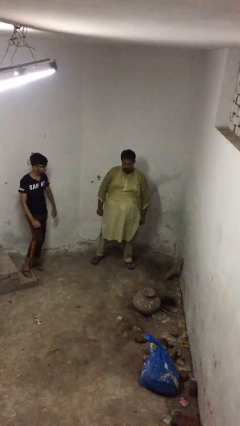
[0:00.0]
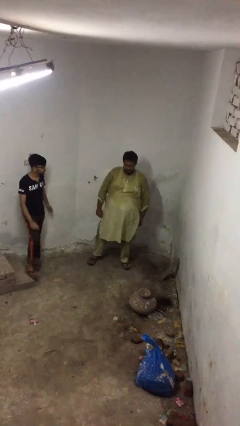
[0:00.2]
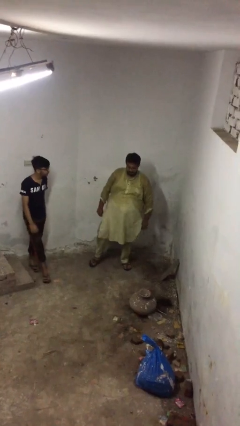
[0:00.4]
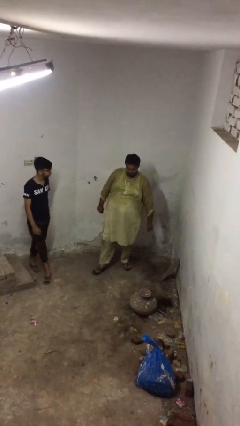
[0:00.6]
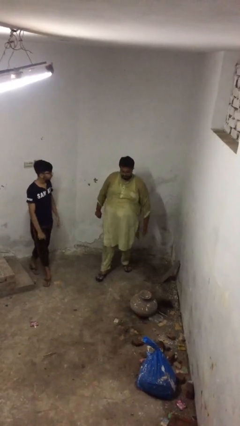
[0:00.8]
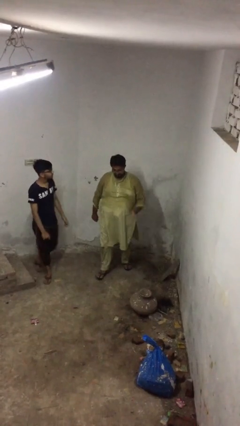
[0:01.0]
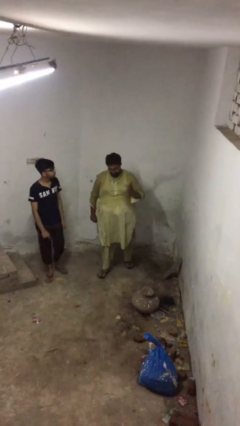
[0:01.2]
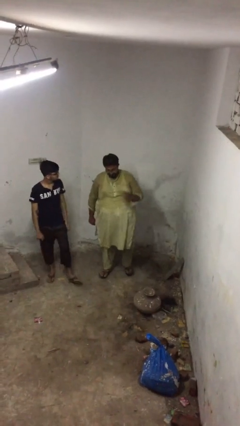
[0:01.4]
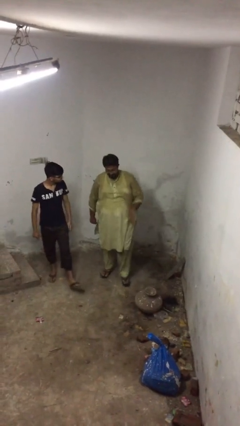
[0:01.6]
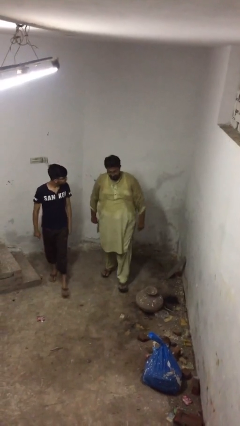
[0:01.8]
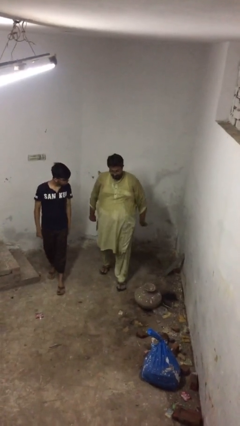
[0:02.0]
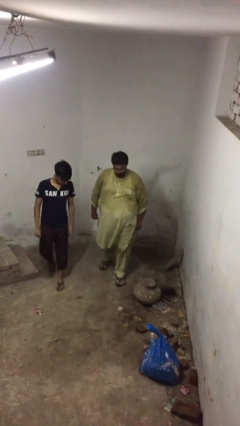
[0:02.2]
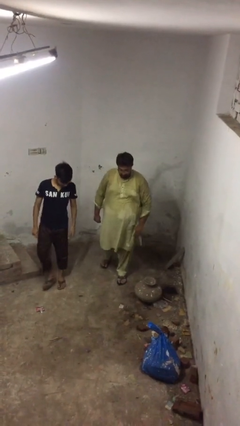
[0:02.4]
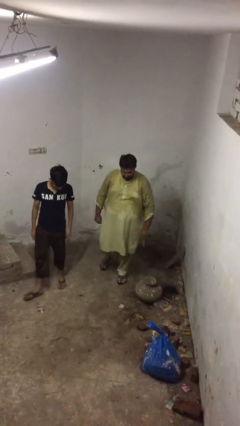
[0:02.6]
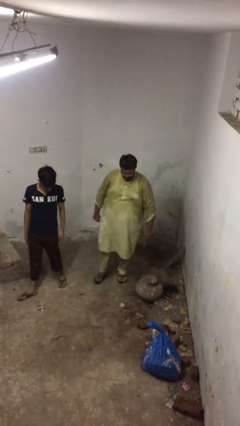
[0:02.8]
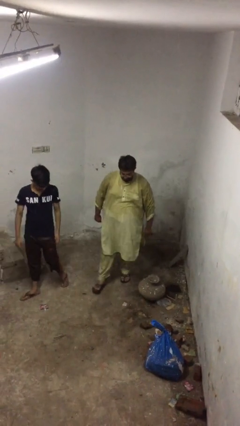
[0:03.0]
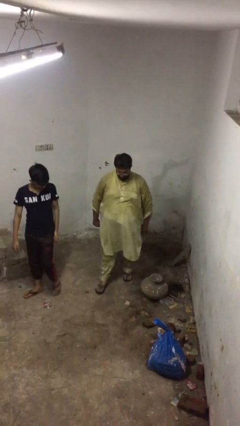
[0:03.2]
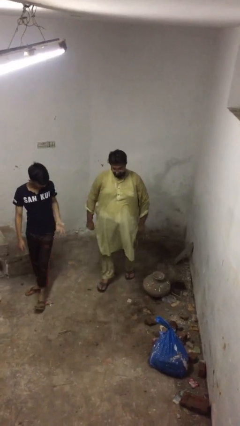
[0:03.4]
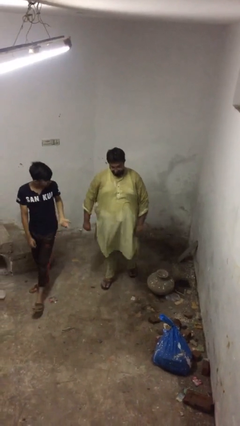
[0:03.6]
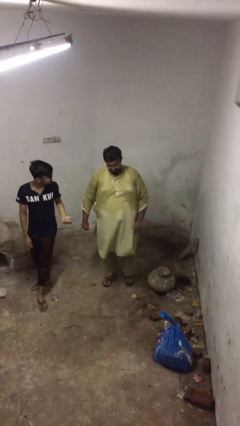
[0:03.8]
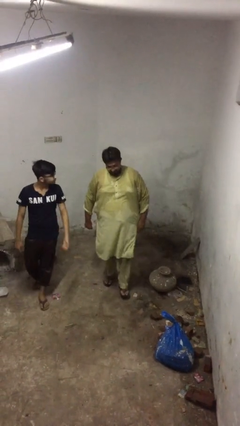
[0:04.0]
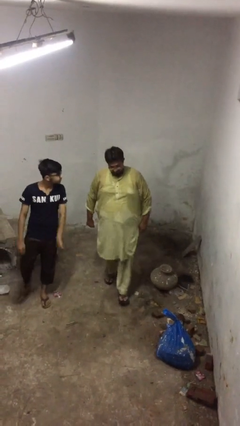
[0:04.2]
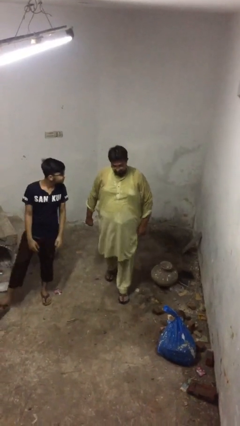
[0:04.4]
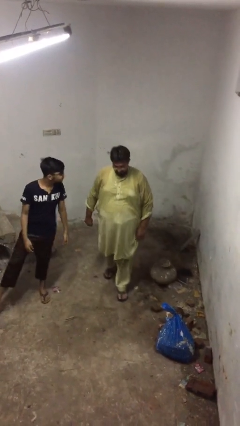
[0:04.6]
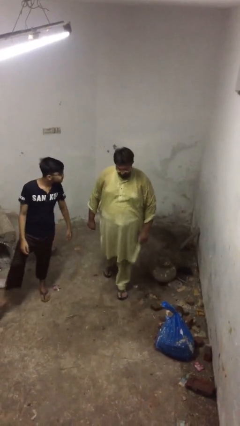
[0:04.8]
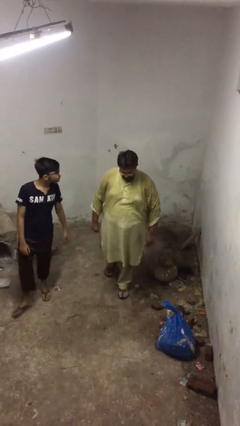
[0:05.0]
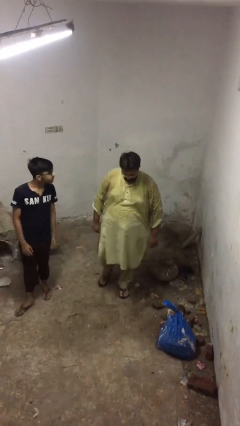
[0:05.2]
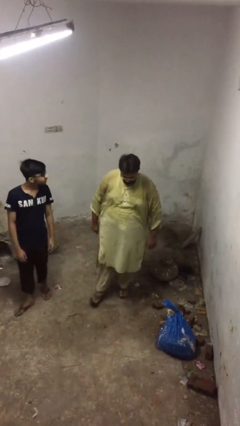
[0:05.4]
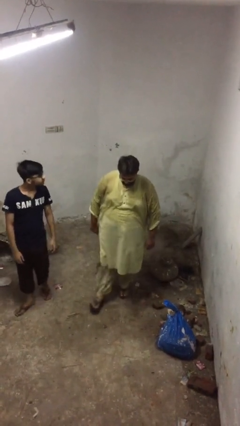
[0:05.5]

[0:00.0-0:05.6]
person talks to person

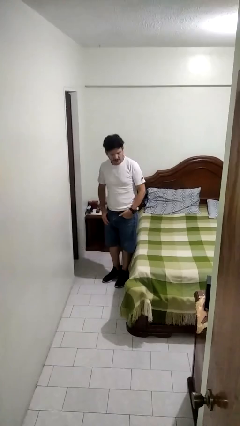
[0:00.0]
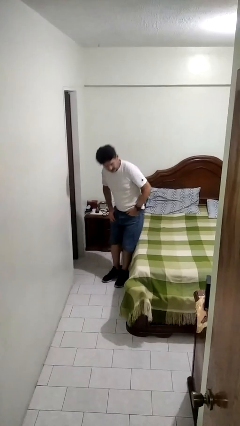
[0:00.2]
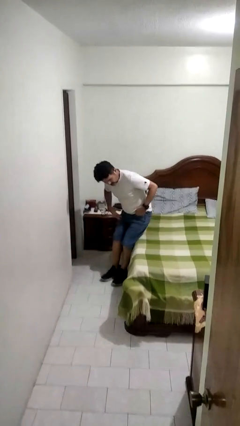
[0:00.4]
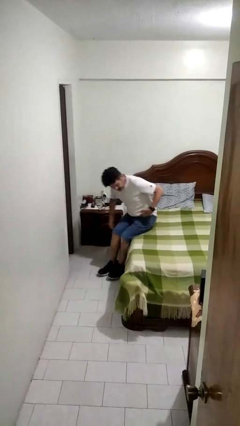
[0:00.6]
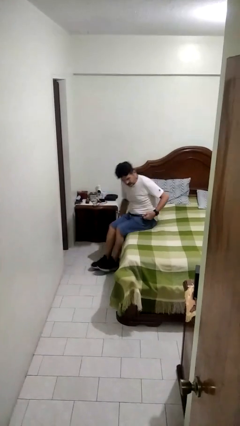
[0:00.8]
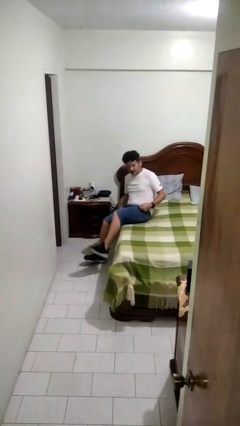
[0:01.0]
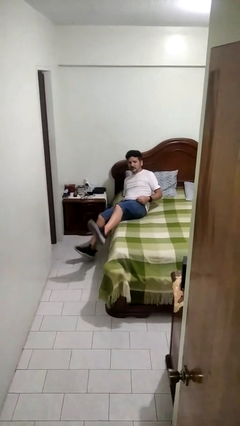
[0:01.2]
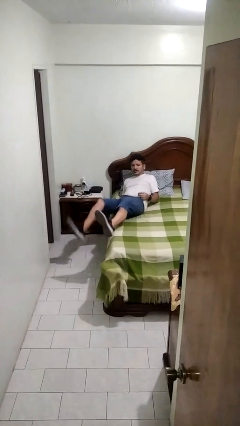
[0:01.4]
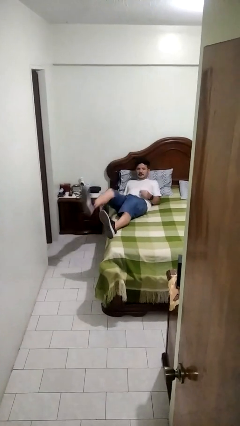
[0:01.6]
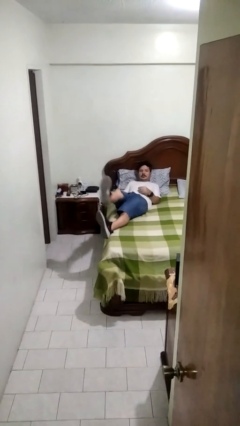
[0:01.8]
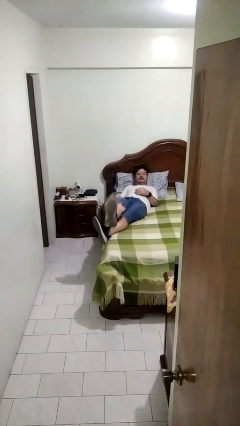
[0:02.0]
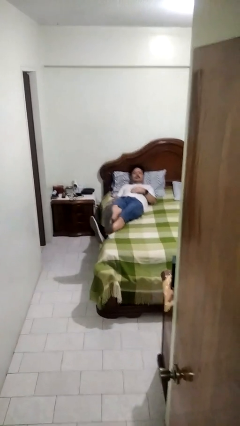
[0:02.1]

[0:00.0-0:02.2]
person lies down on bed

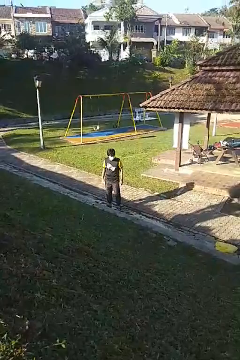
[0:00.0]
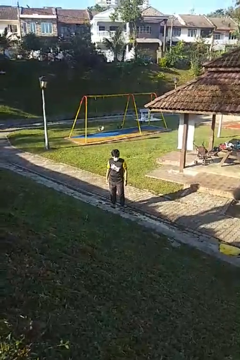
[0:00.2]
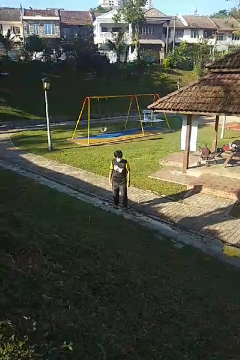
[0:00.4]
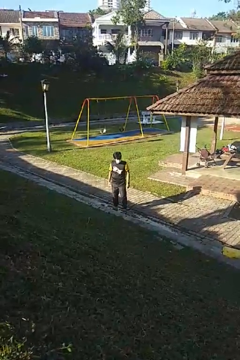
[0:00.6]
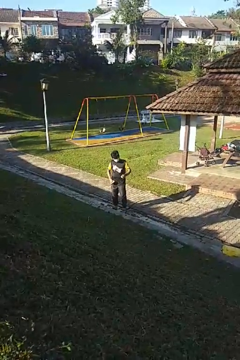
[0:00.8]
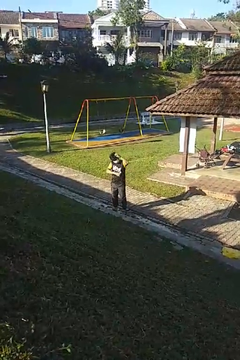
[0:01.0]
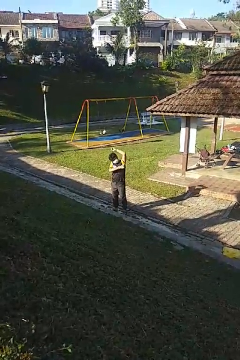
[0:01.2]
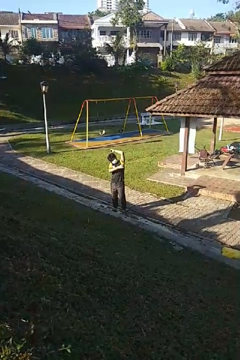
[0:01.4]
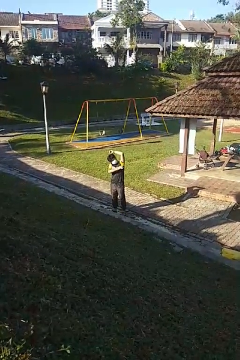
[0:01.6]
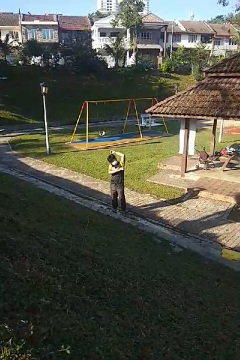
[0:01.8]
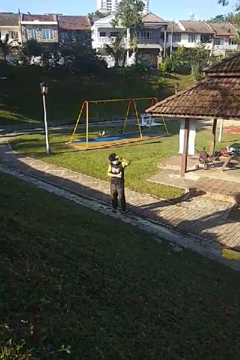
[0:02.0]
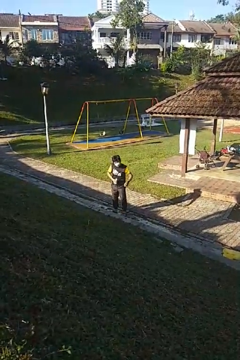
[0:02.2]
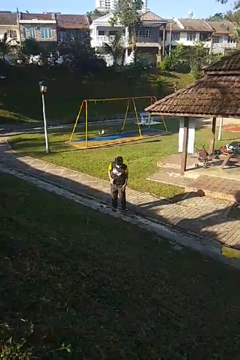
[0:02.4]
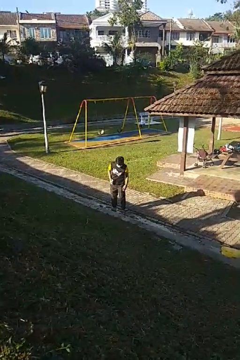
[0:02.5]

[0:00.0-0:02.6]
person applies deodorant

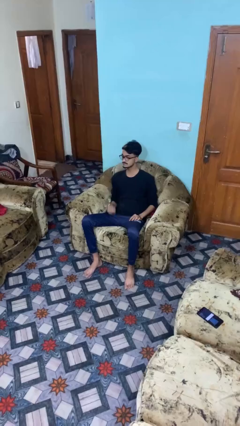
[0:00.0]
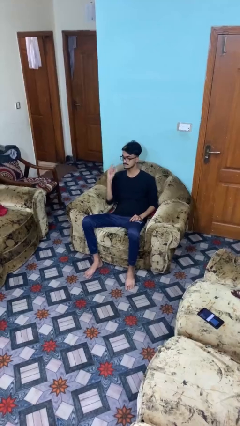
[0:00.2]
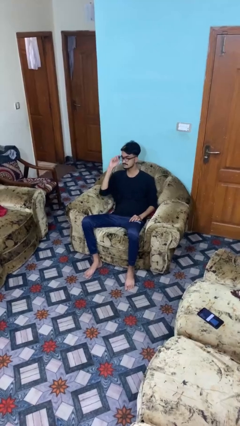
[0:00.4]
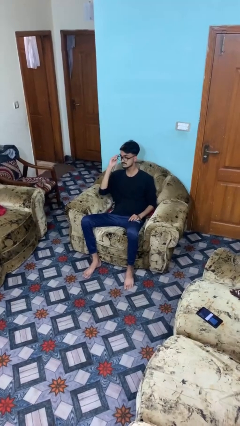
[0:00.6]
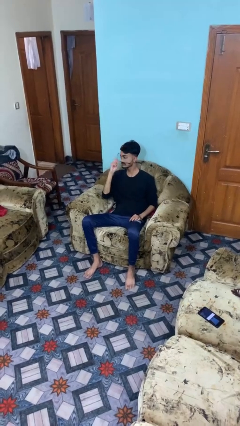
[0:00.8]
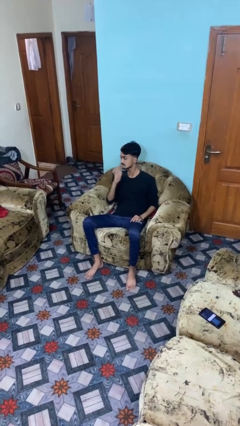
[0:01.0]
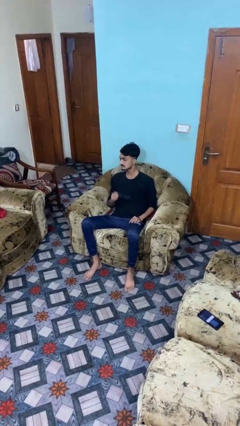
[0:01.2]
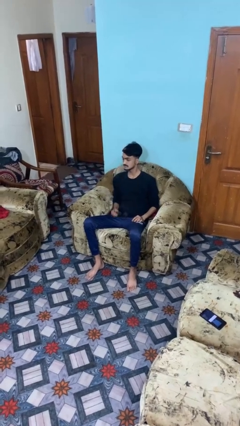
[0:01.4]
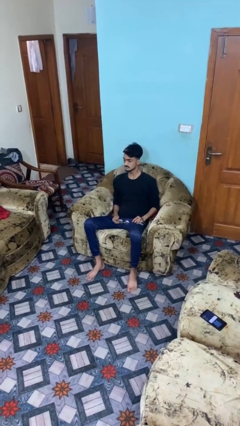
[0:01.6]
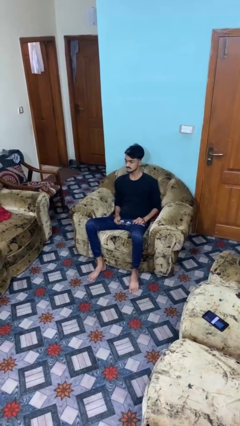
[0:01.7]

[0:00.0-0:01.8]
person takes off glasses

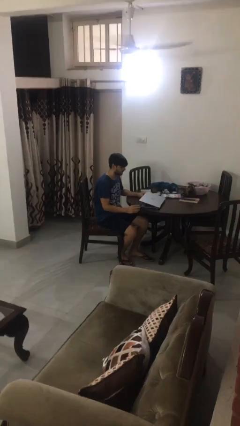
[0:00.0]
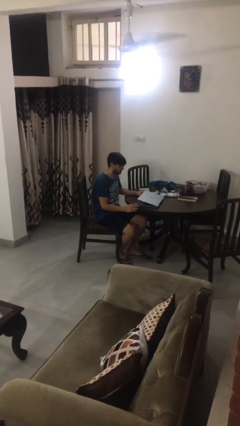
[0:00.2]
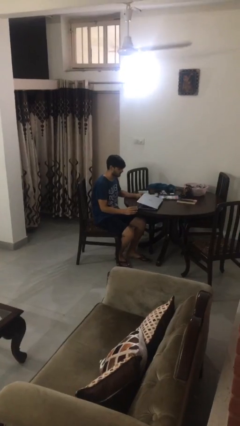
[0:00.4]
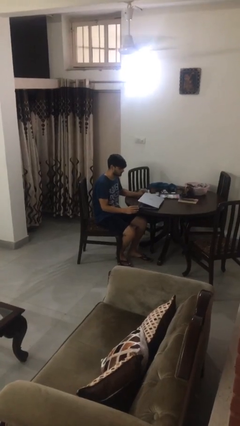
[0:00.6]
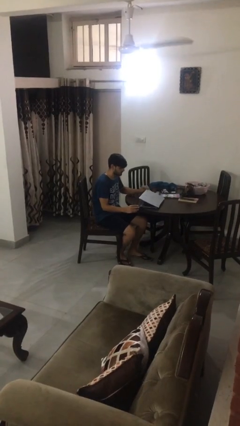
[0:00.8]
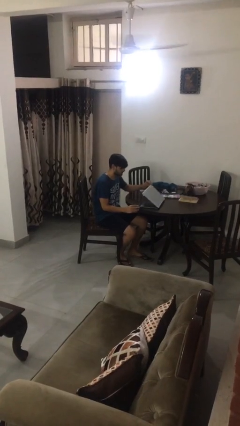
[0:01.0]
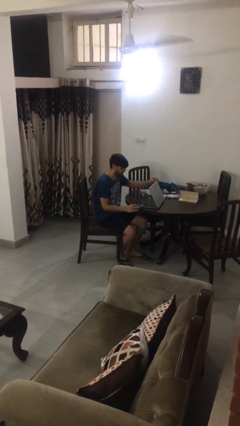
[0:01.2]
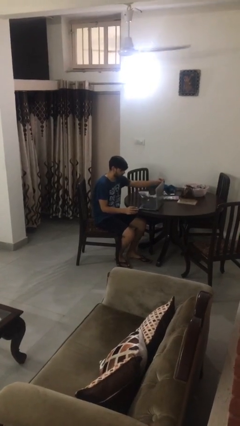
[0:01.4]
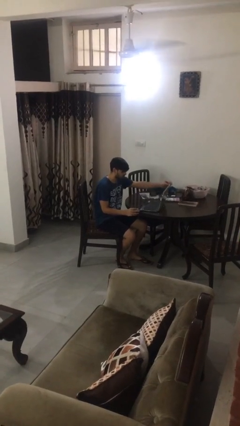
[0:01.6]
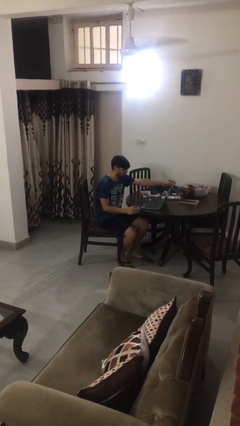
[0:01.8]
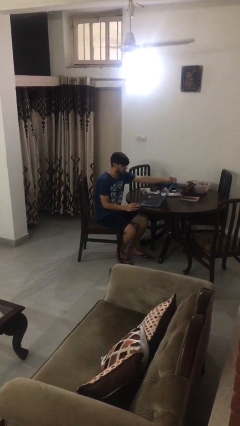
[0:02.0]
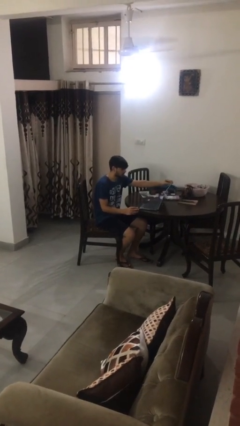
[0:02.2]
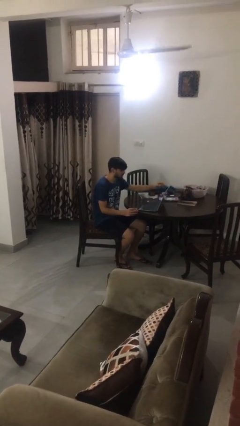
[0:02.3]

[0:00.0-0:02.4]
person opens laptop

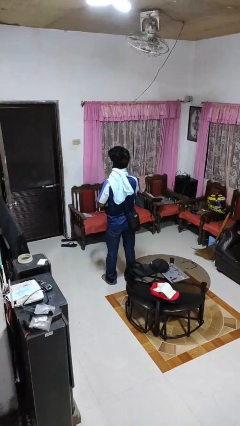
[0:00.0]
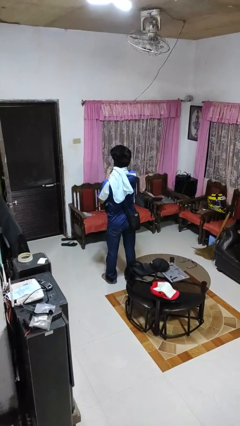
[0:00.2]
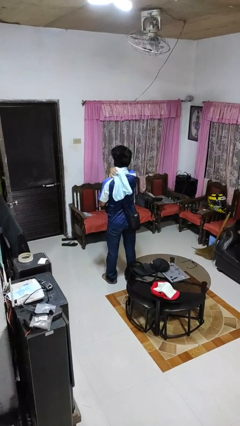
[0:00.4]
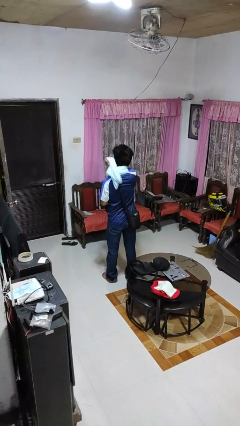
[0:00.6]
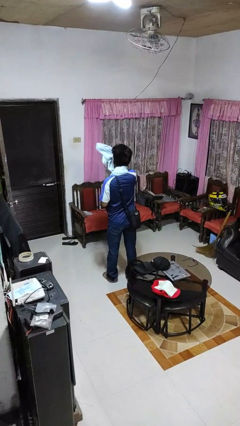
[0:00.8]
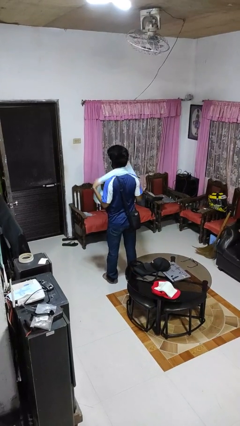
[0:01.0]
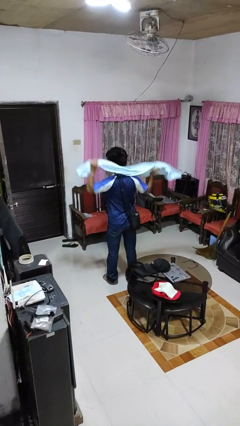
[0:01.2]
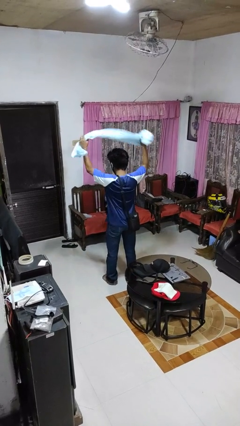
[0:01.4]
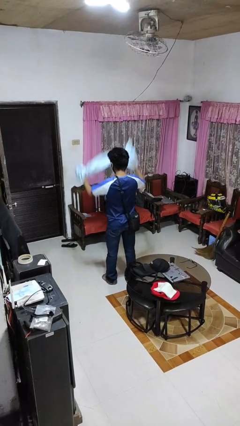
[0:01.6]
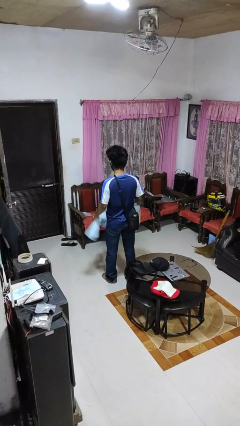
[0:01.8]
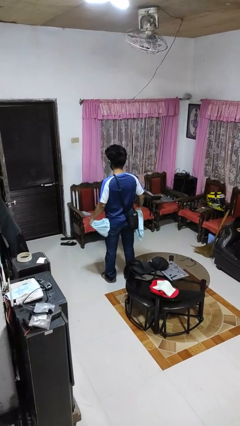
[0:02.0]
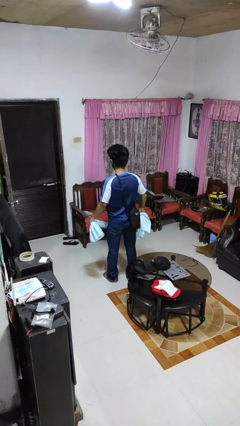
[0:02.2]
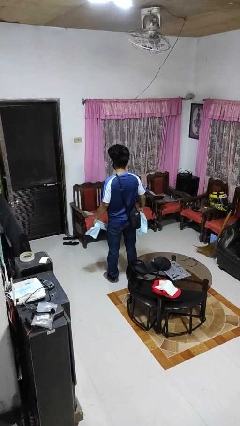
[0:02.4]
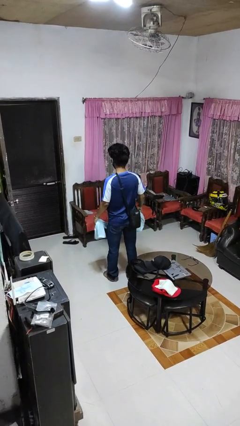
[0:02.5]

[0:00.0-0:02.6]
person takes off scarf

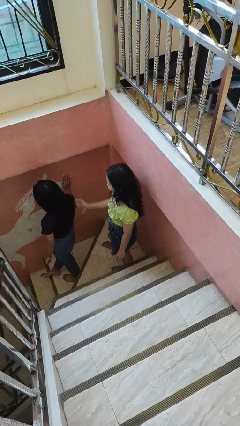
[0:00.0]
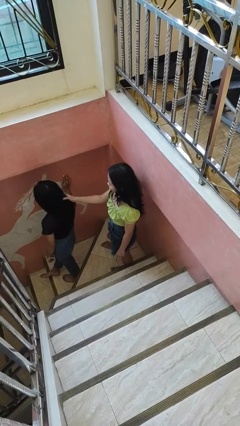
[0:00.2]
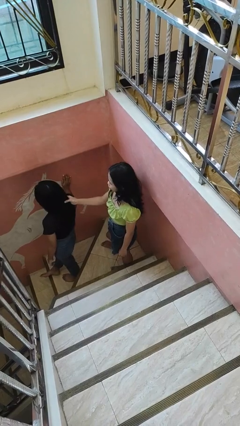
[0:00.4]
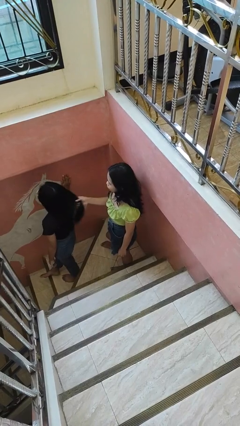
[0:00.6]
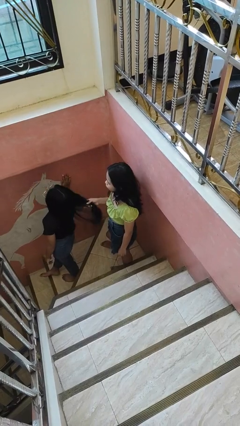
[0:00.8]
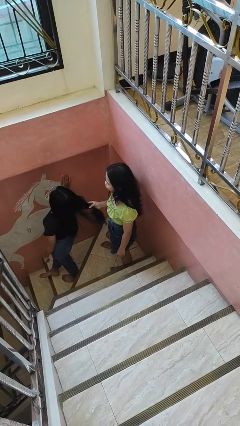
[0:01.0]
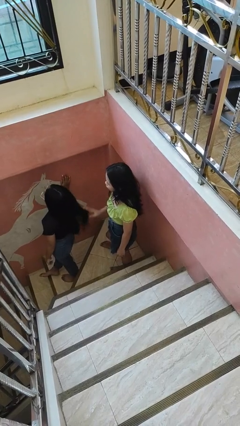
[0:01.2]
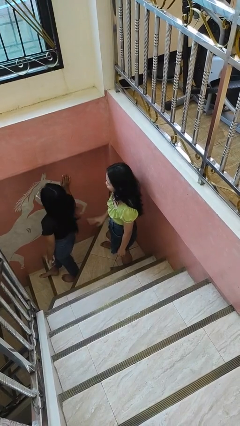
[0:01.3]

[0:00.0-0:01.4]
person grabs person by hair
